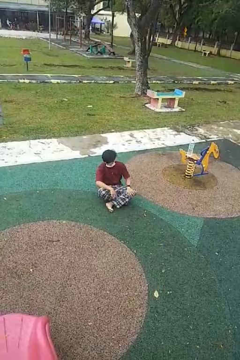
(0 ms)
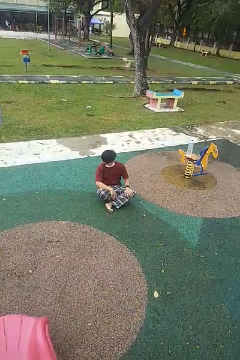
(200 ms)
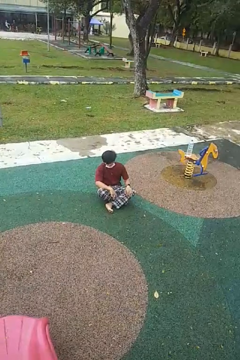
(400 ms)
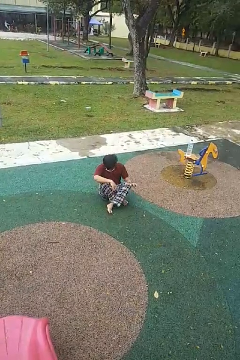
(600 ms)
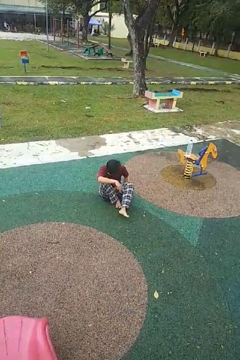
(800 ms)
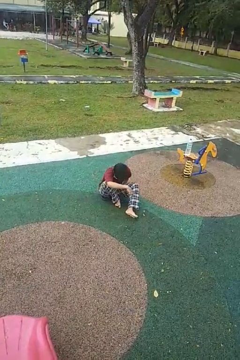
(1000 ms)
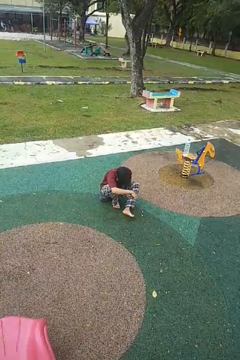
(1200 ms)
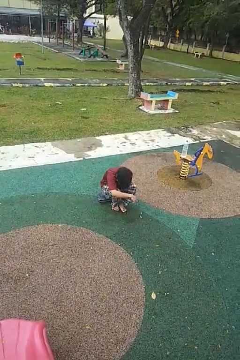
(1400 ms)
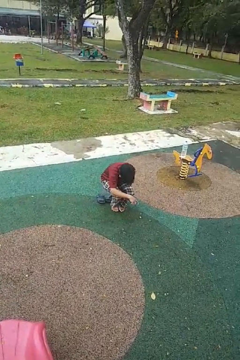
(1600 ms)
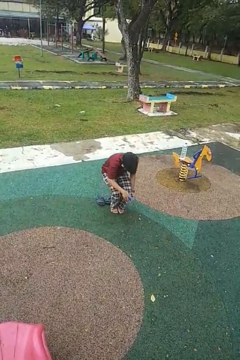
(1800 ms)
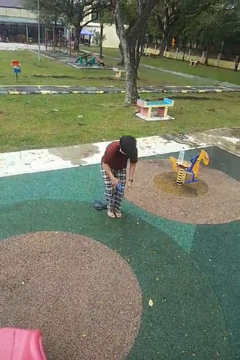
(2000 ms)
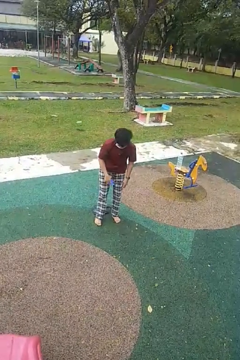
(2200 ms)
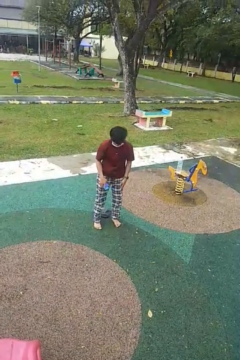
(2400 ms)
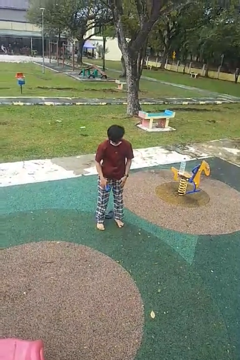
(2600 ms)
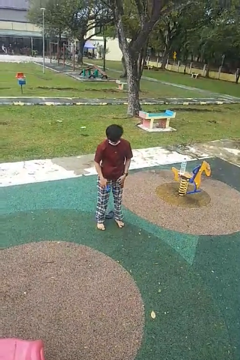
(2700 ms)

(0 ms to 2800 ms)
person stands up from floor

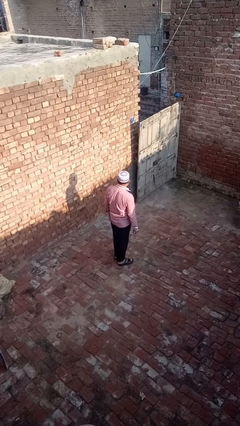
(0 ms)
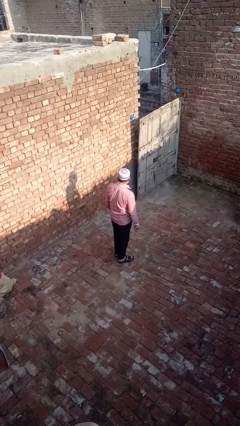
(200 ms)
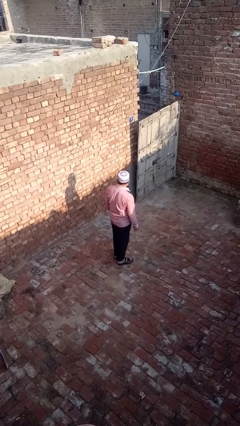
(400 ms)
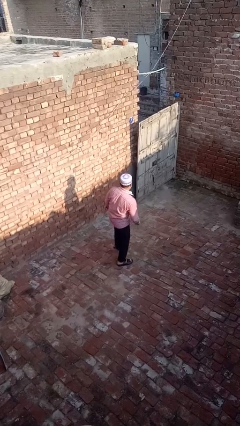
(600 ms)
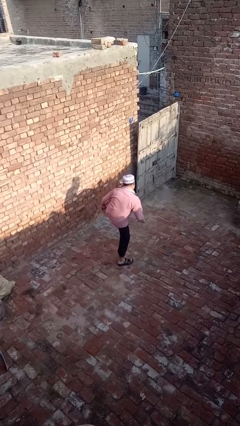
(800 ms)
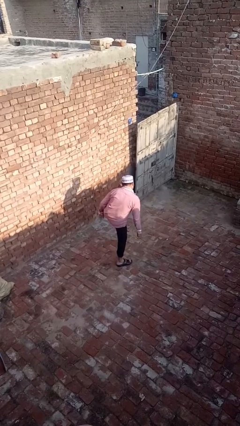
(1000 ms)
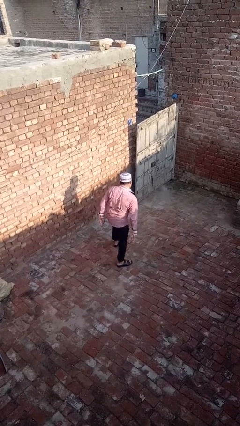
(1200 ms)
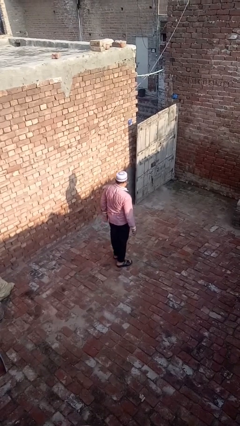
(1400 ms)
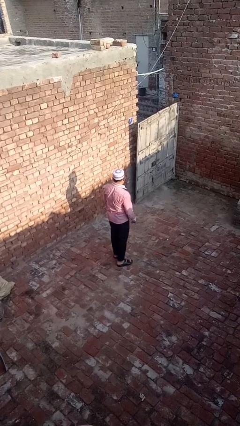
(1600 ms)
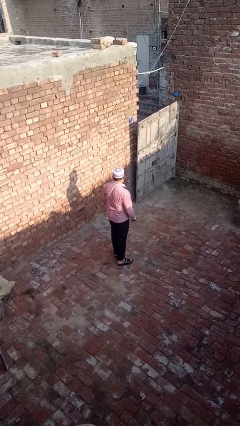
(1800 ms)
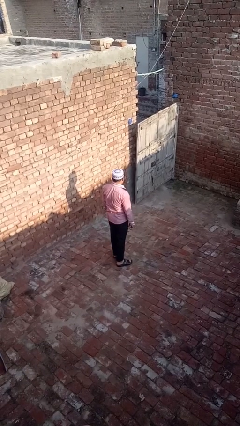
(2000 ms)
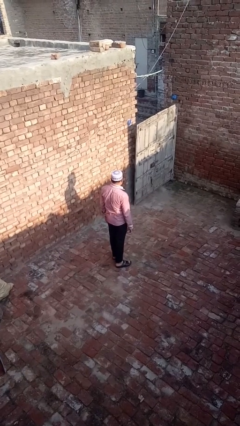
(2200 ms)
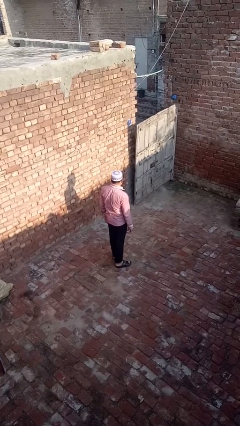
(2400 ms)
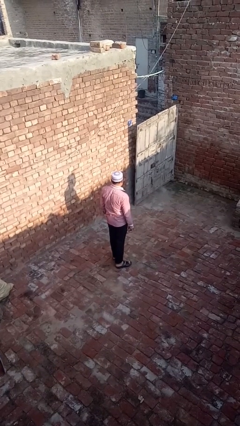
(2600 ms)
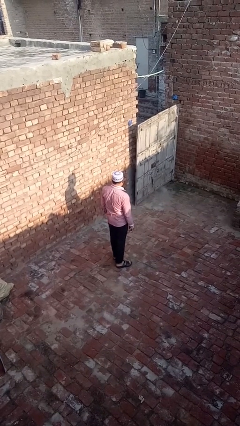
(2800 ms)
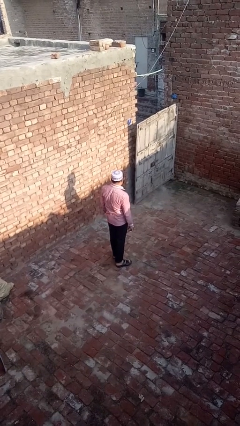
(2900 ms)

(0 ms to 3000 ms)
person karate kicks

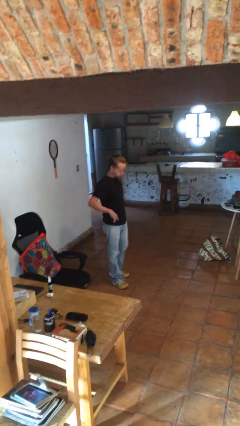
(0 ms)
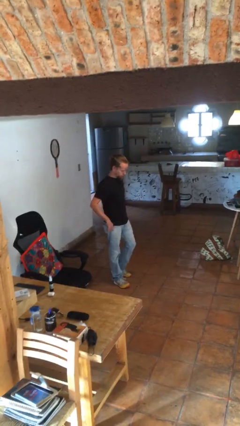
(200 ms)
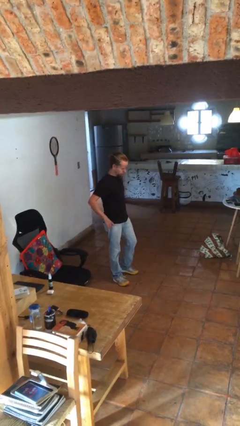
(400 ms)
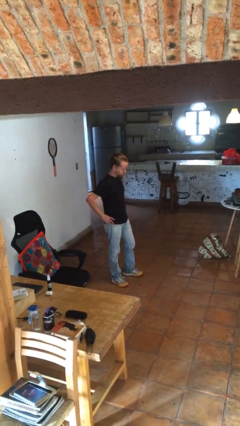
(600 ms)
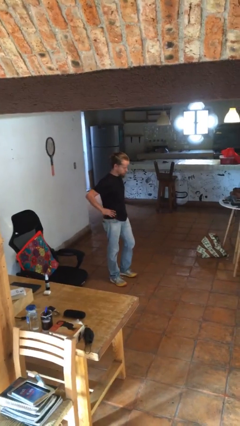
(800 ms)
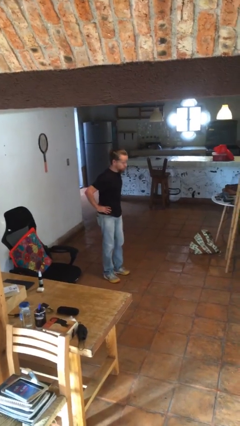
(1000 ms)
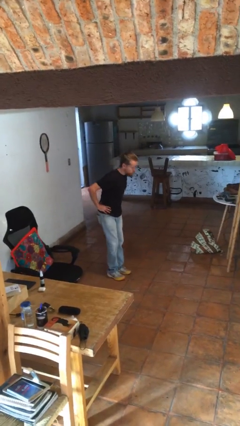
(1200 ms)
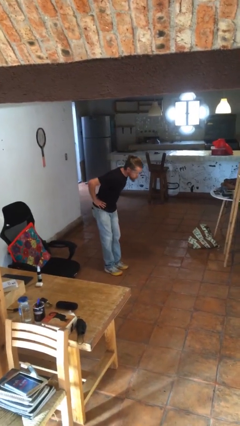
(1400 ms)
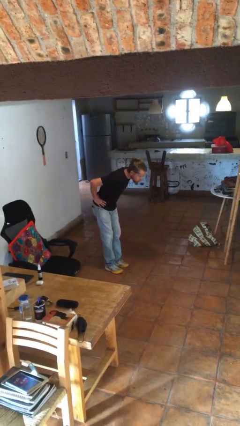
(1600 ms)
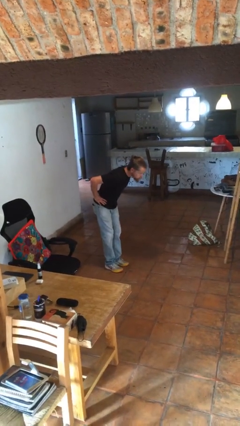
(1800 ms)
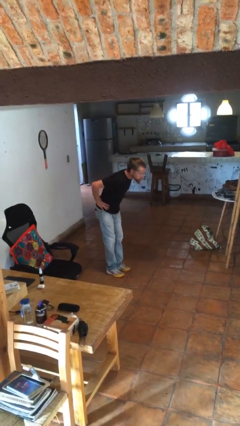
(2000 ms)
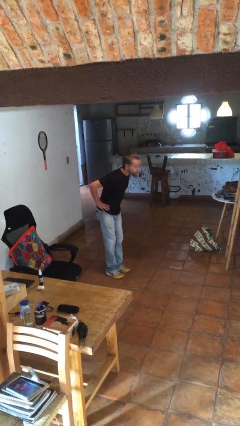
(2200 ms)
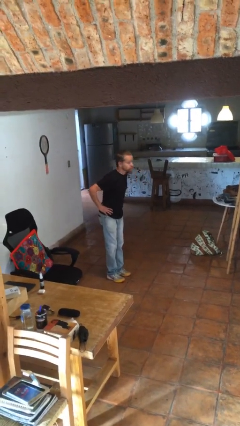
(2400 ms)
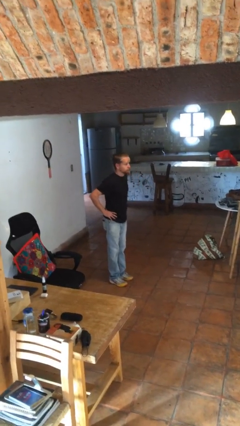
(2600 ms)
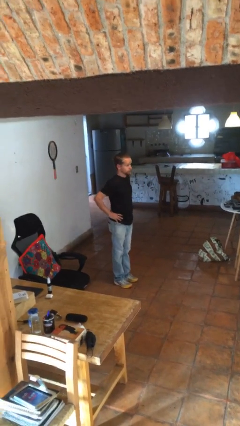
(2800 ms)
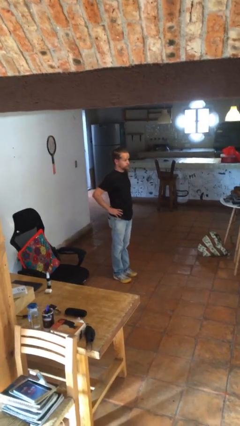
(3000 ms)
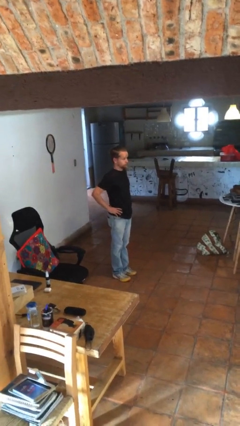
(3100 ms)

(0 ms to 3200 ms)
person bows

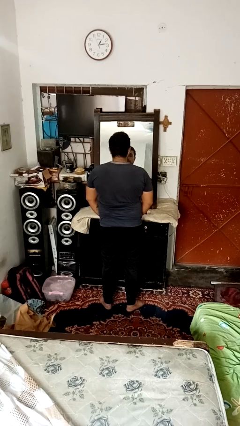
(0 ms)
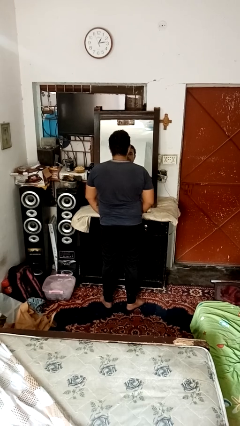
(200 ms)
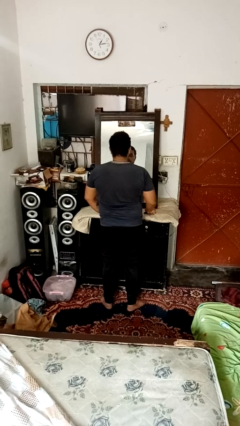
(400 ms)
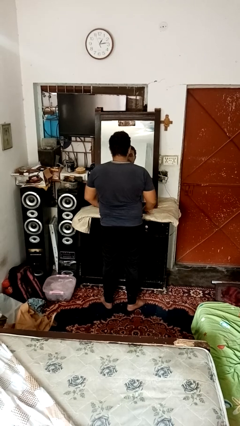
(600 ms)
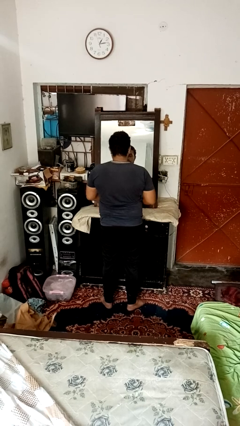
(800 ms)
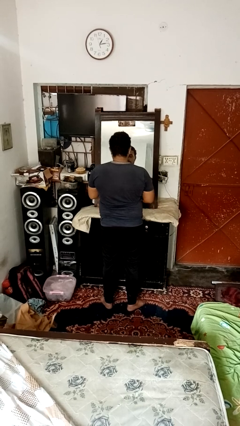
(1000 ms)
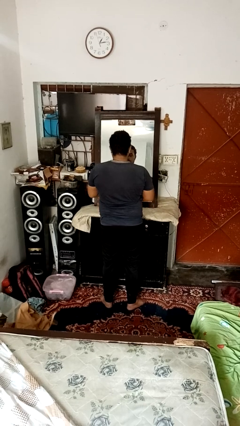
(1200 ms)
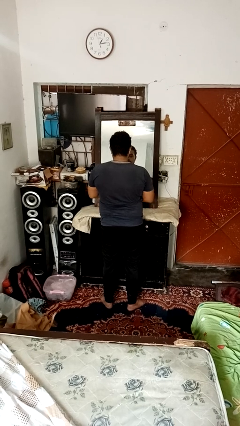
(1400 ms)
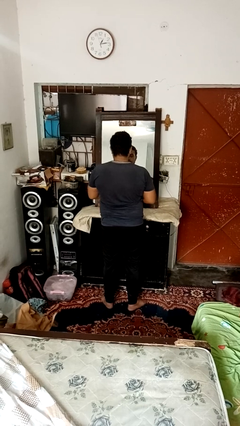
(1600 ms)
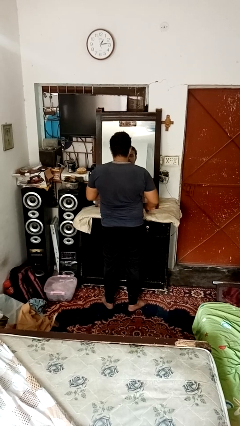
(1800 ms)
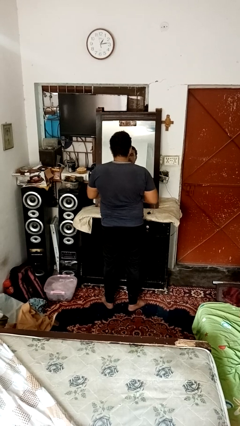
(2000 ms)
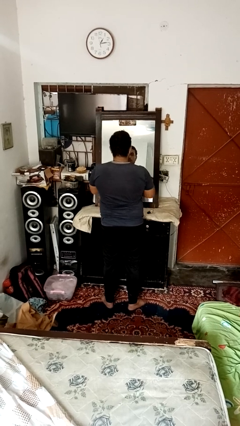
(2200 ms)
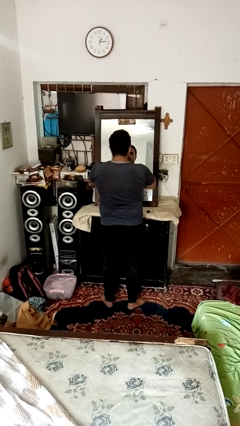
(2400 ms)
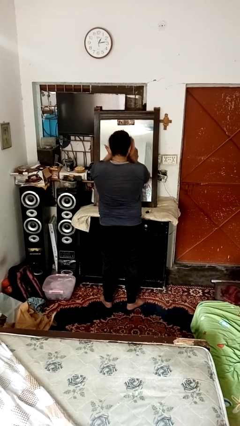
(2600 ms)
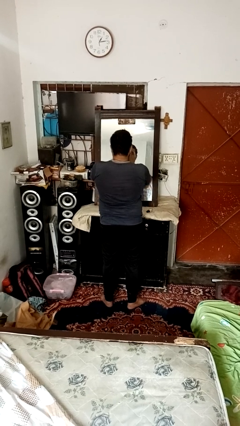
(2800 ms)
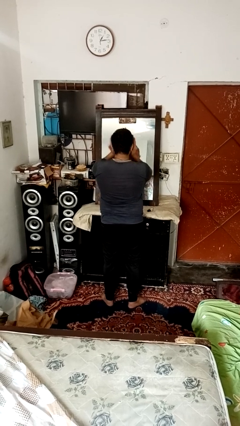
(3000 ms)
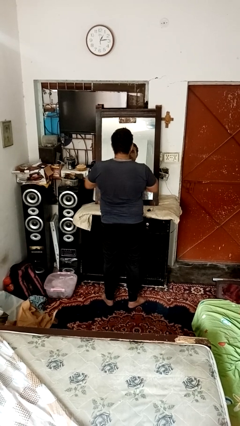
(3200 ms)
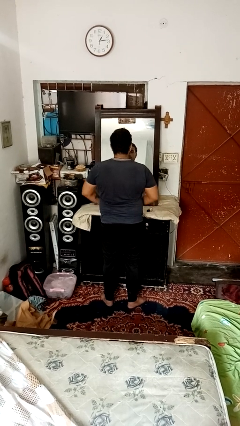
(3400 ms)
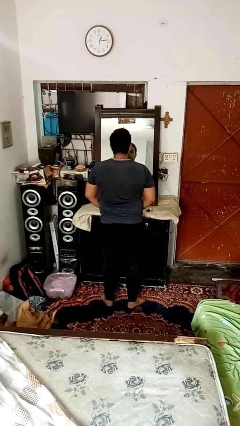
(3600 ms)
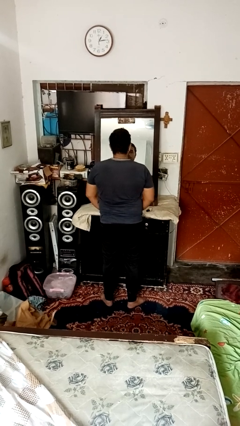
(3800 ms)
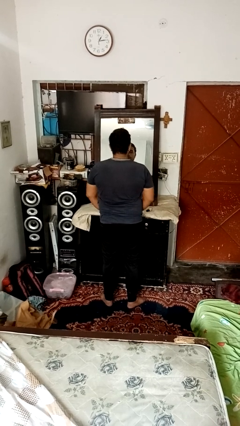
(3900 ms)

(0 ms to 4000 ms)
person applies foundation makeup

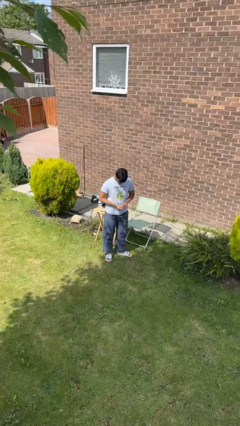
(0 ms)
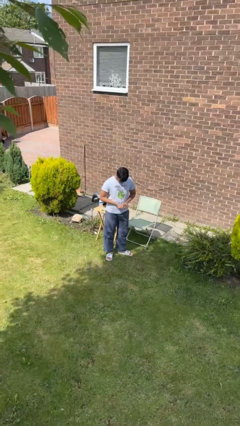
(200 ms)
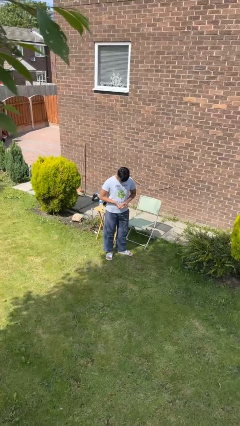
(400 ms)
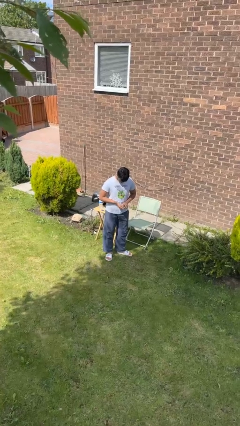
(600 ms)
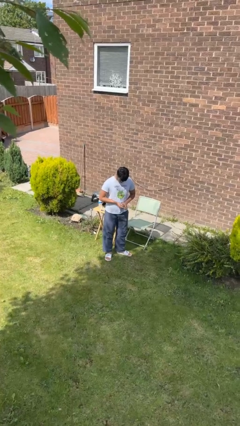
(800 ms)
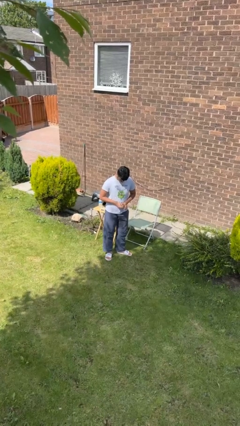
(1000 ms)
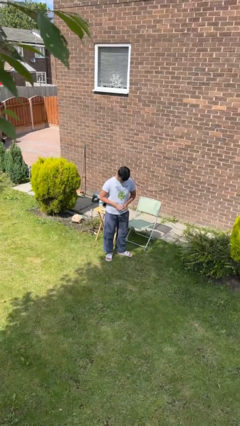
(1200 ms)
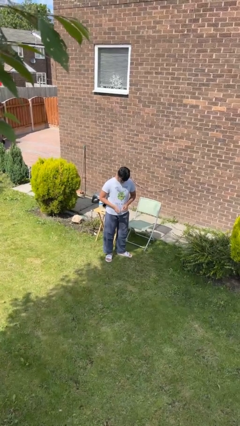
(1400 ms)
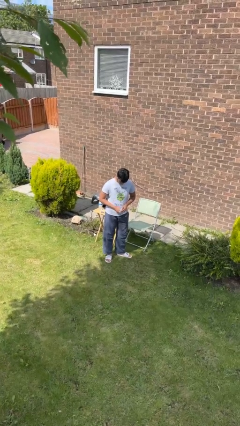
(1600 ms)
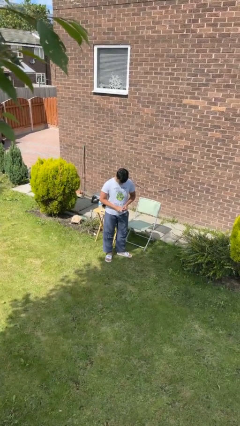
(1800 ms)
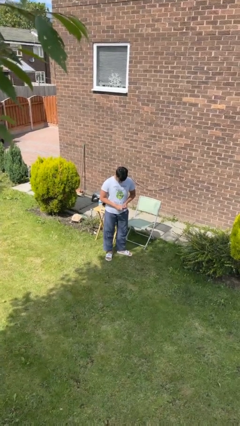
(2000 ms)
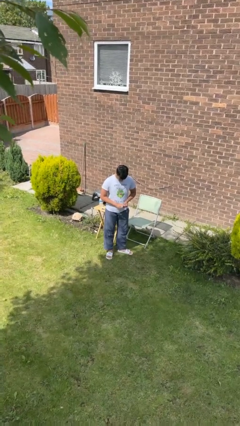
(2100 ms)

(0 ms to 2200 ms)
person takes off ring

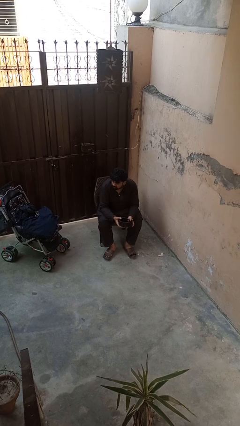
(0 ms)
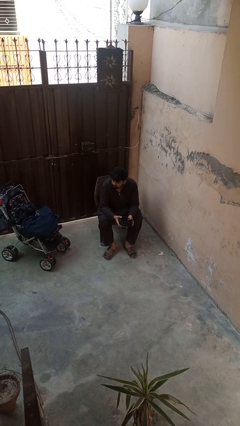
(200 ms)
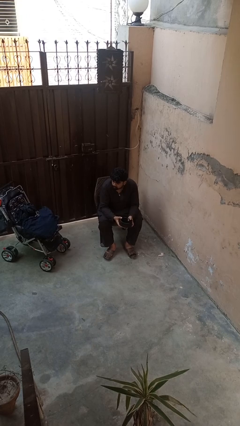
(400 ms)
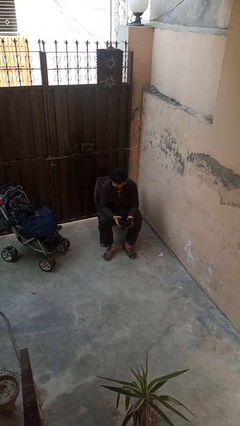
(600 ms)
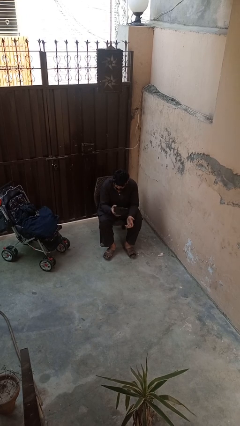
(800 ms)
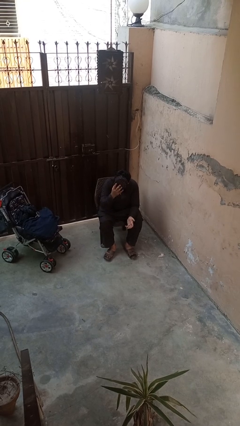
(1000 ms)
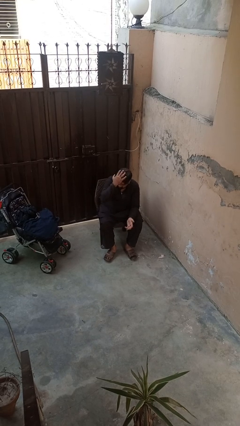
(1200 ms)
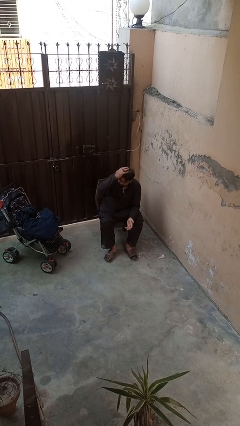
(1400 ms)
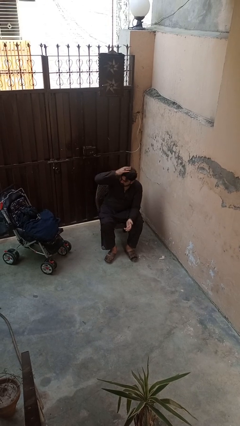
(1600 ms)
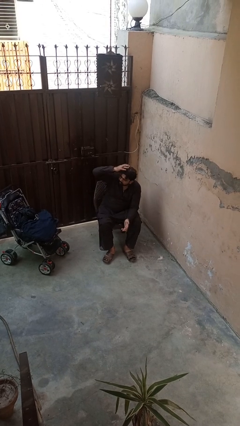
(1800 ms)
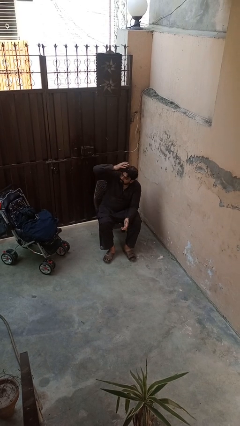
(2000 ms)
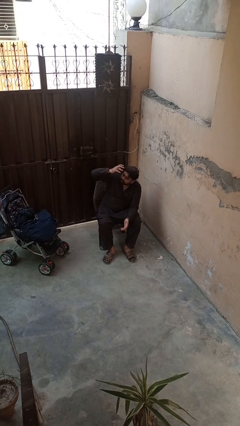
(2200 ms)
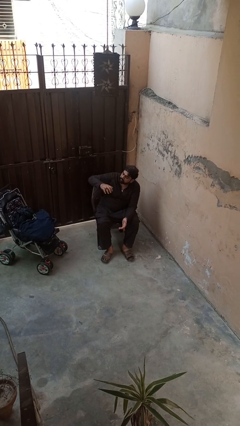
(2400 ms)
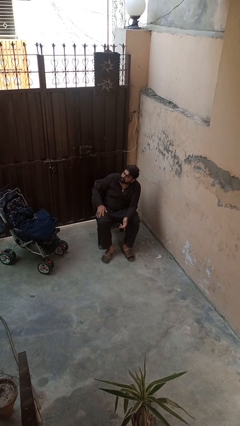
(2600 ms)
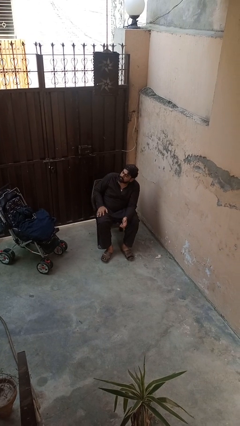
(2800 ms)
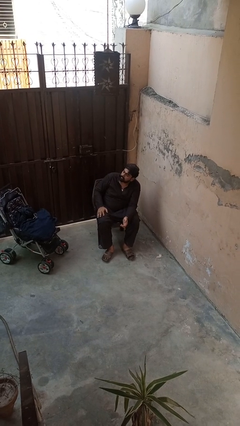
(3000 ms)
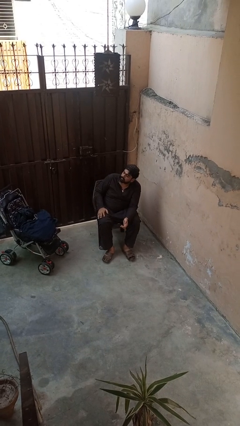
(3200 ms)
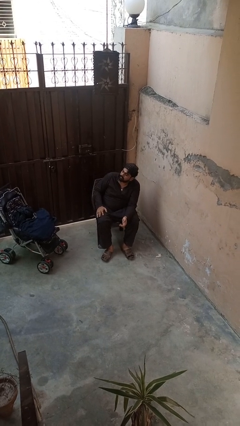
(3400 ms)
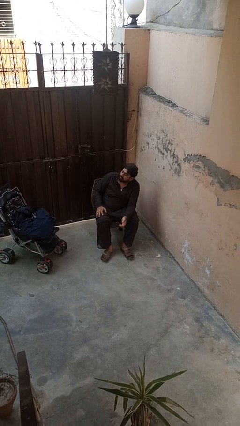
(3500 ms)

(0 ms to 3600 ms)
person puts on hat
